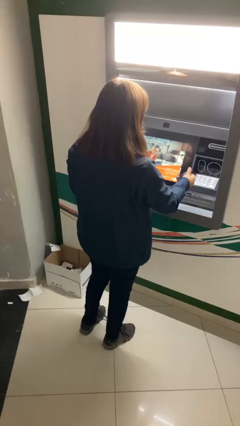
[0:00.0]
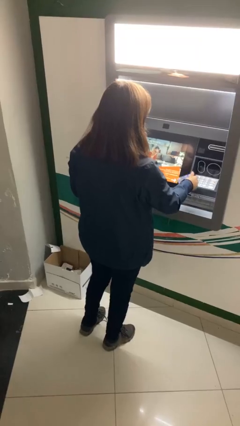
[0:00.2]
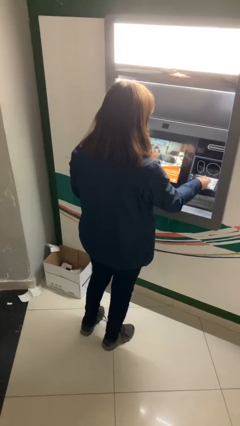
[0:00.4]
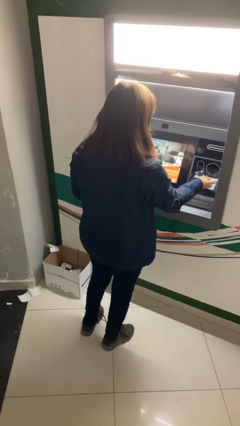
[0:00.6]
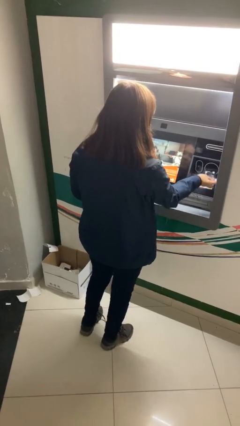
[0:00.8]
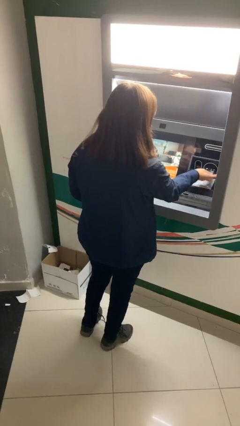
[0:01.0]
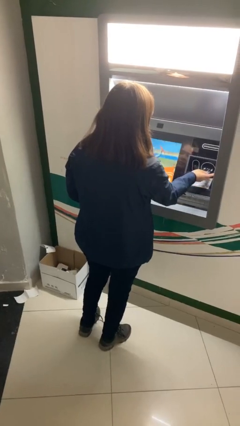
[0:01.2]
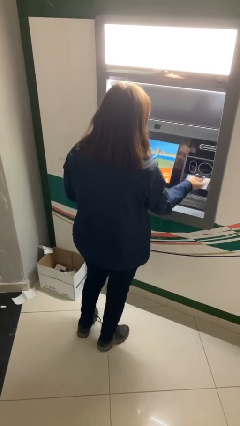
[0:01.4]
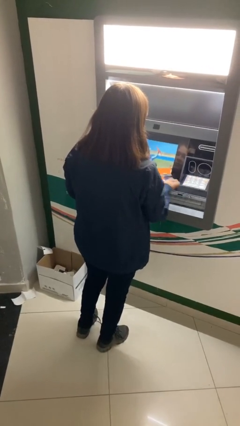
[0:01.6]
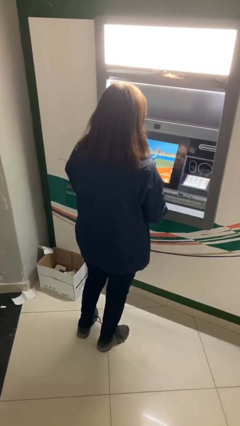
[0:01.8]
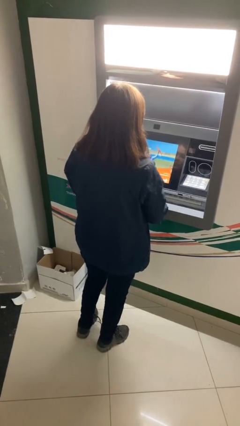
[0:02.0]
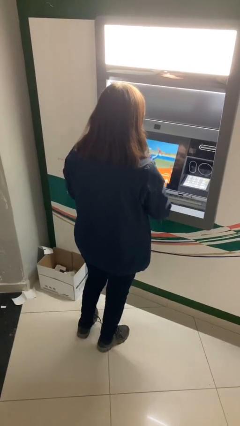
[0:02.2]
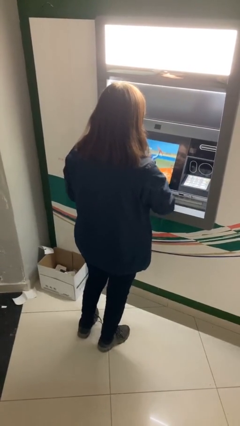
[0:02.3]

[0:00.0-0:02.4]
person purchases from machine

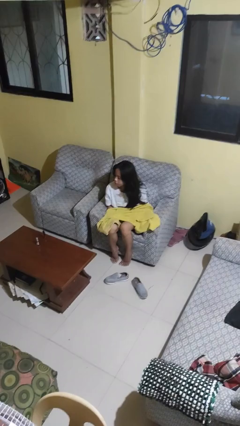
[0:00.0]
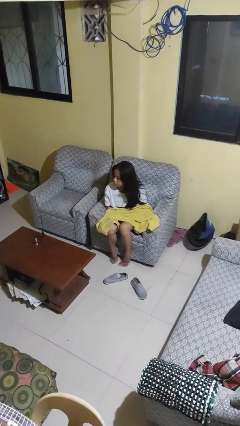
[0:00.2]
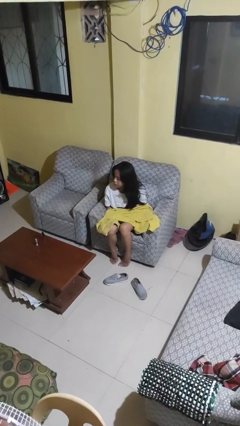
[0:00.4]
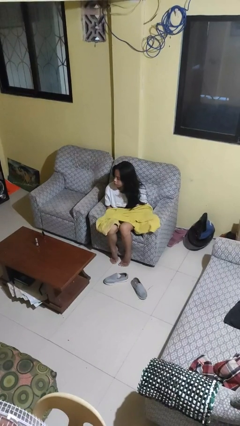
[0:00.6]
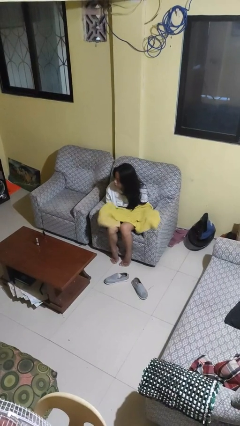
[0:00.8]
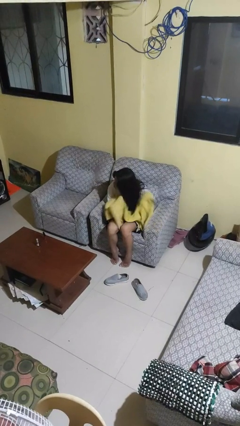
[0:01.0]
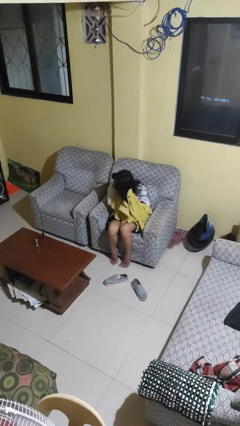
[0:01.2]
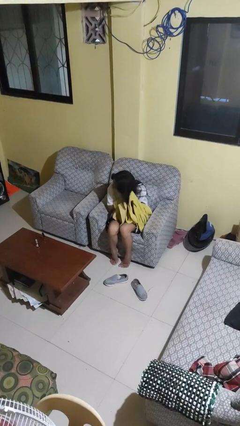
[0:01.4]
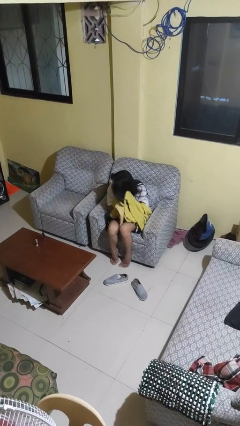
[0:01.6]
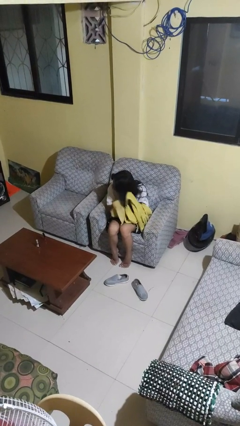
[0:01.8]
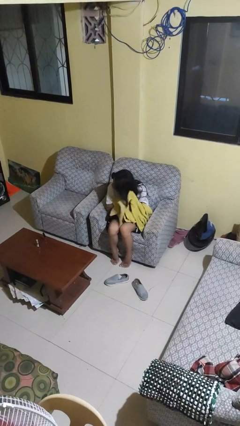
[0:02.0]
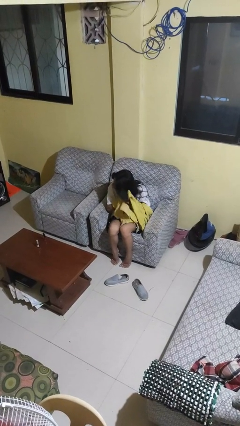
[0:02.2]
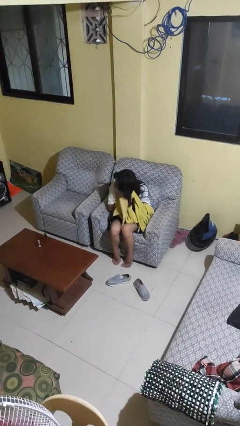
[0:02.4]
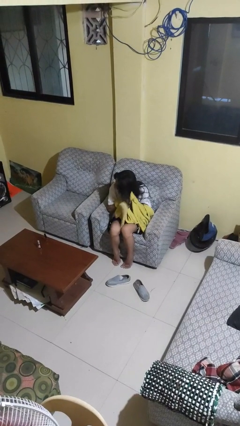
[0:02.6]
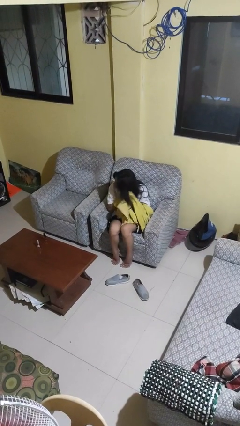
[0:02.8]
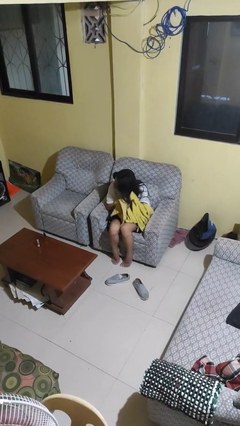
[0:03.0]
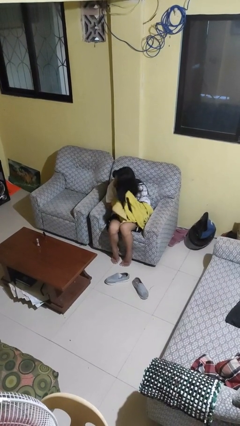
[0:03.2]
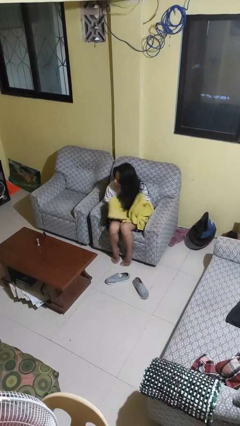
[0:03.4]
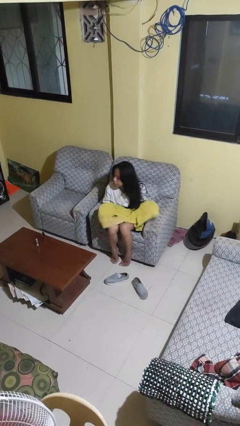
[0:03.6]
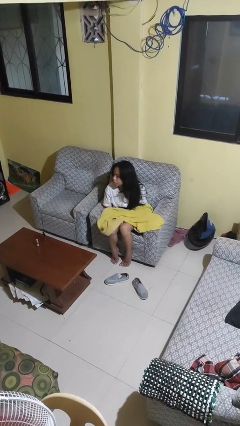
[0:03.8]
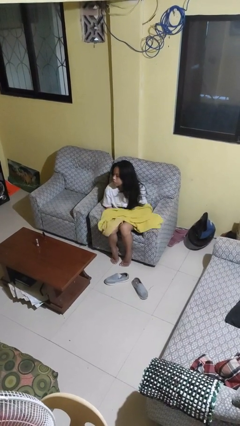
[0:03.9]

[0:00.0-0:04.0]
person dries hair with towel

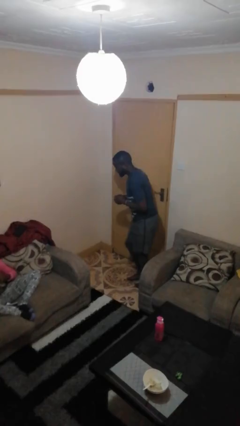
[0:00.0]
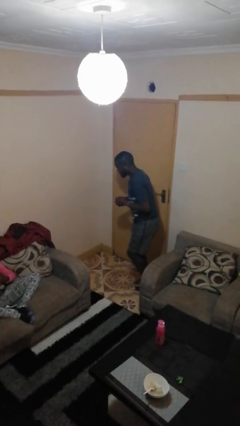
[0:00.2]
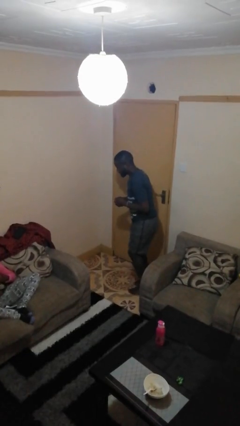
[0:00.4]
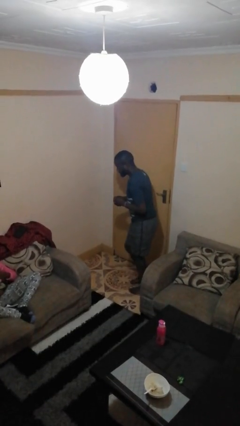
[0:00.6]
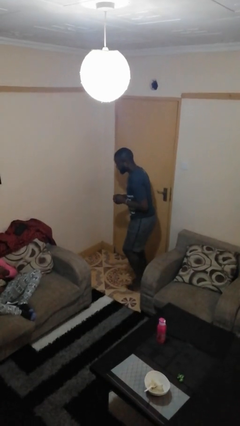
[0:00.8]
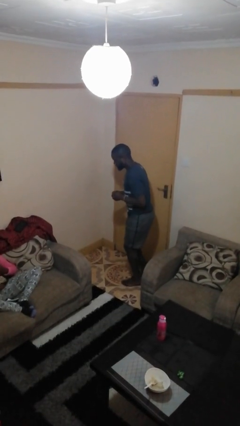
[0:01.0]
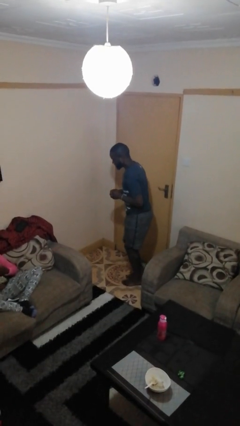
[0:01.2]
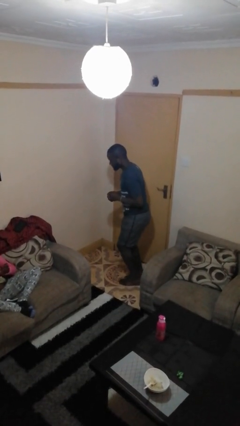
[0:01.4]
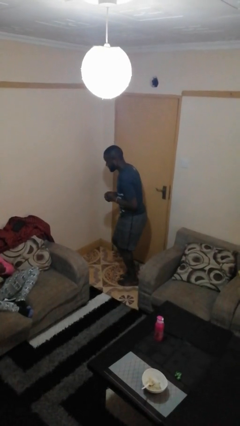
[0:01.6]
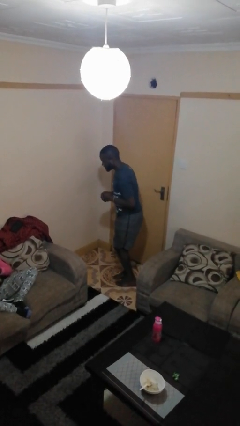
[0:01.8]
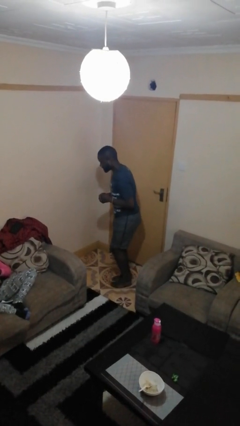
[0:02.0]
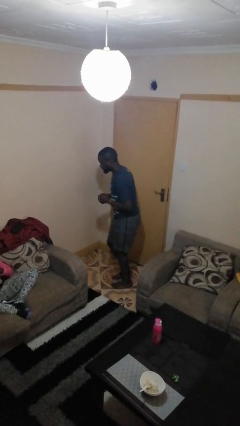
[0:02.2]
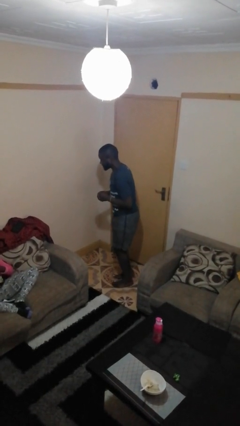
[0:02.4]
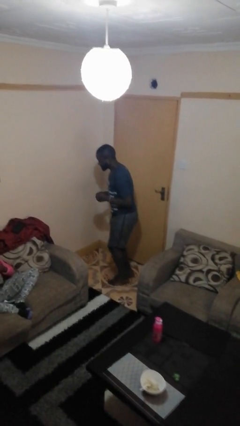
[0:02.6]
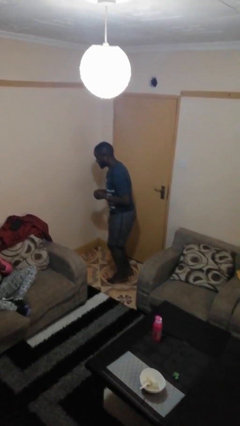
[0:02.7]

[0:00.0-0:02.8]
person walks tiptoe

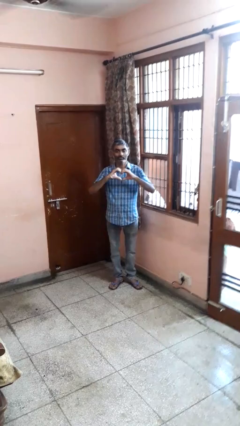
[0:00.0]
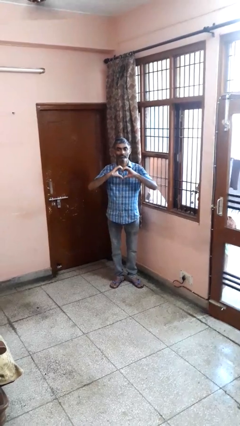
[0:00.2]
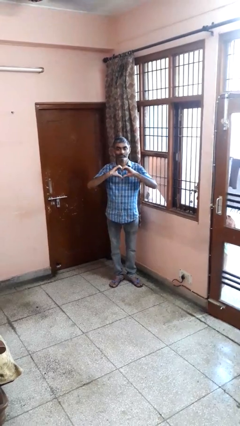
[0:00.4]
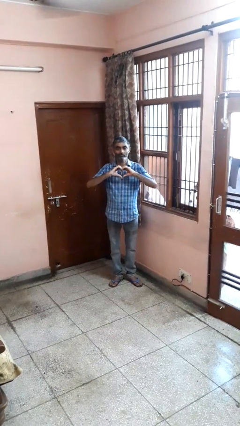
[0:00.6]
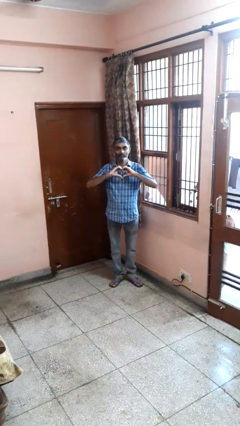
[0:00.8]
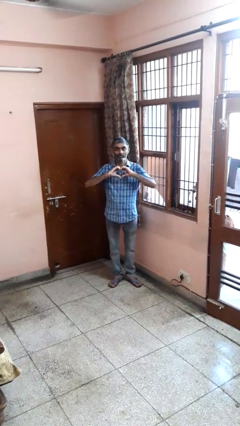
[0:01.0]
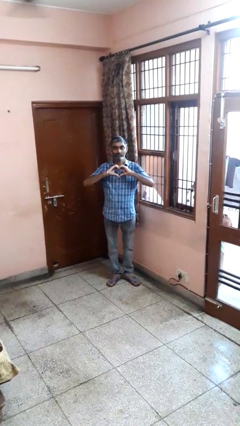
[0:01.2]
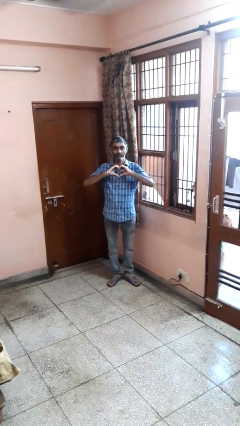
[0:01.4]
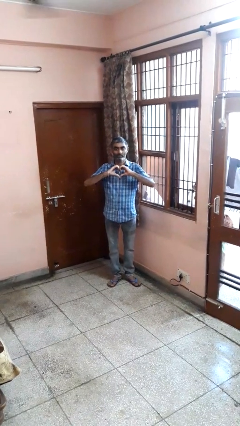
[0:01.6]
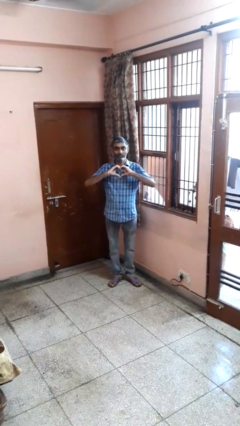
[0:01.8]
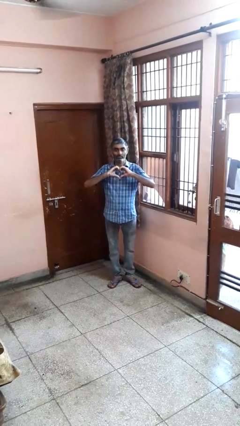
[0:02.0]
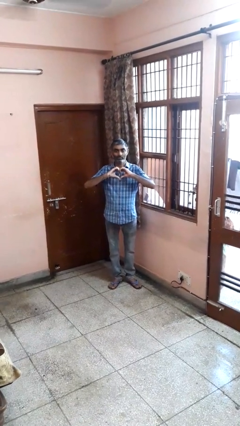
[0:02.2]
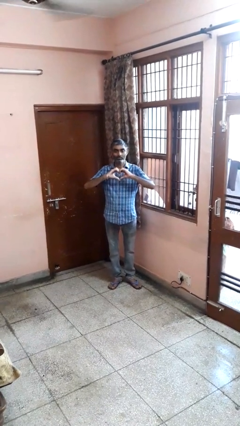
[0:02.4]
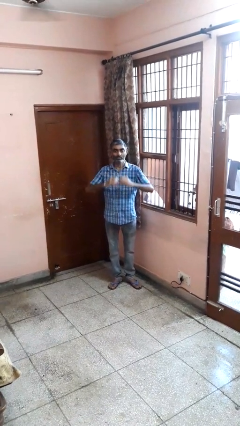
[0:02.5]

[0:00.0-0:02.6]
person gestures heart

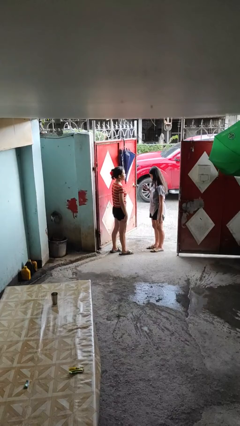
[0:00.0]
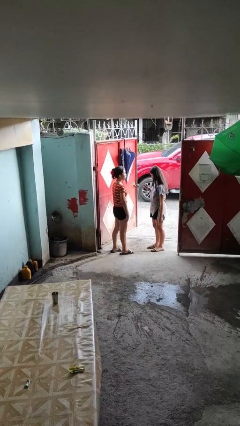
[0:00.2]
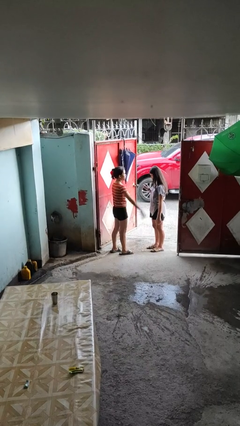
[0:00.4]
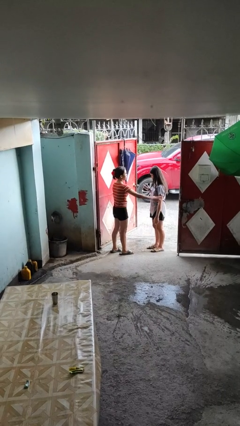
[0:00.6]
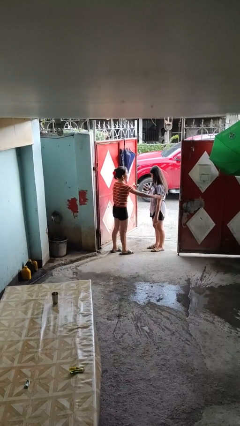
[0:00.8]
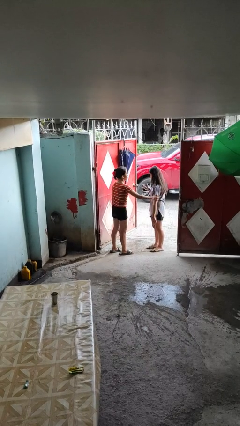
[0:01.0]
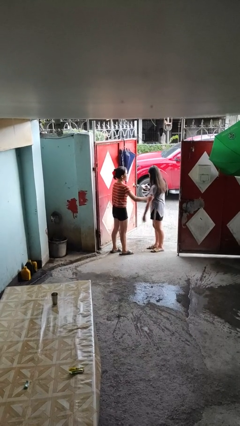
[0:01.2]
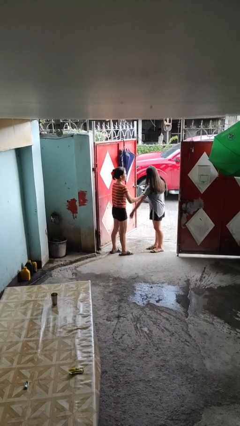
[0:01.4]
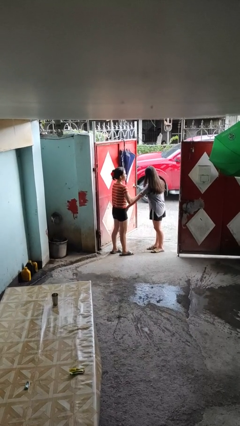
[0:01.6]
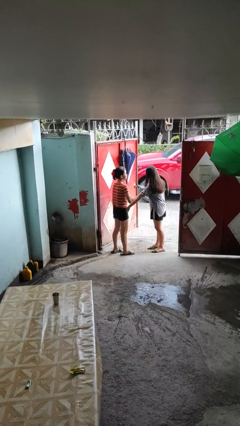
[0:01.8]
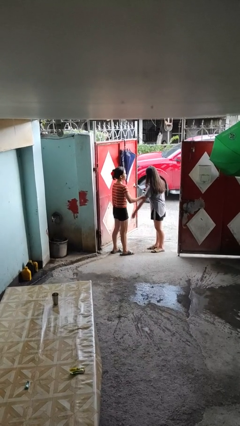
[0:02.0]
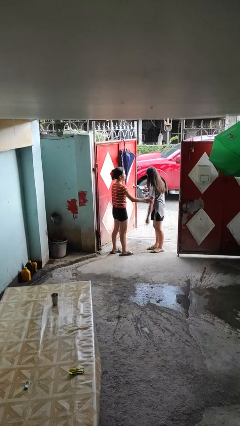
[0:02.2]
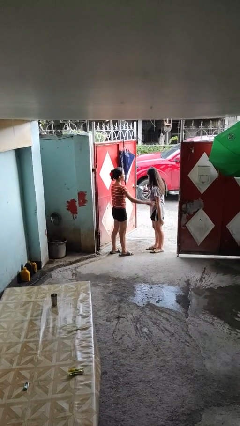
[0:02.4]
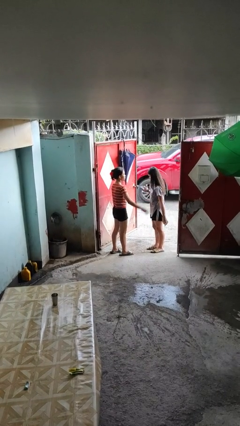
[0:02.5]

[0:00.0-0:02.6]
person grabs person by bicep

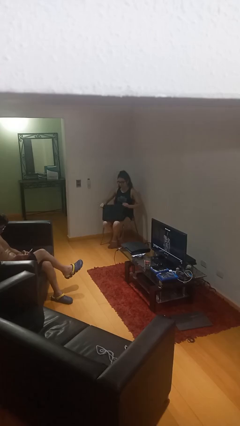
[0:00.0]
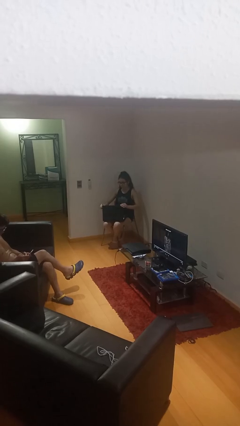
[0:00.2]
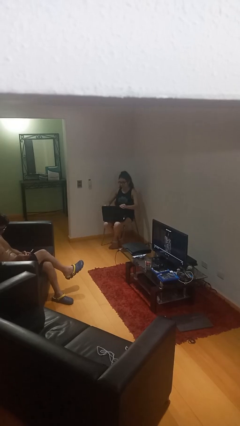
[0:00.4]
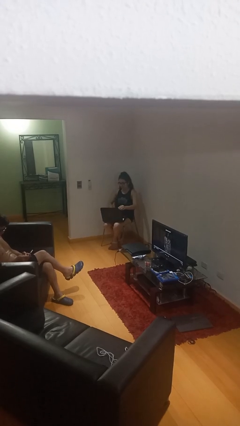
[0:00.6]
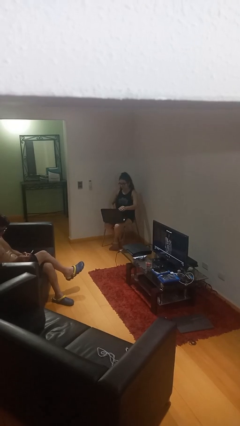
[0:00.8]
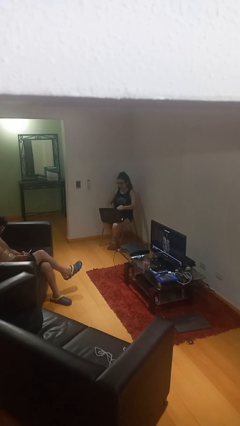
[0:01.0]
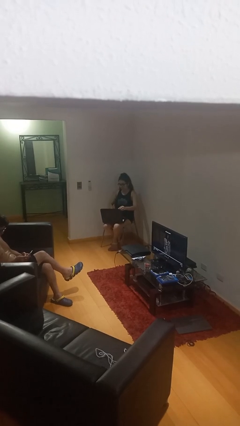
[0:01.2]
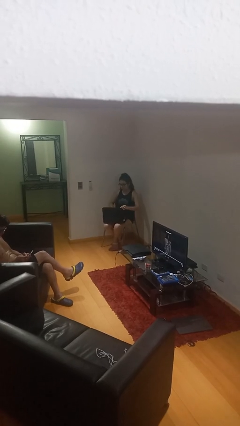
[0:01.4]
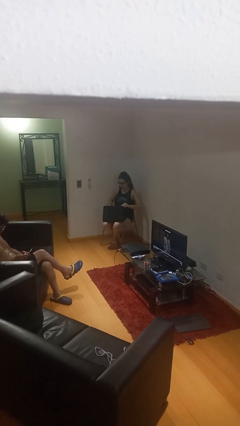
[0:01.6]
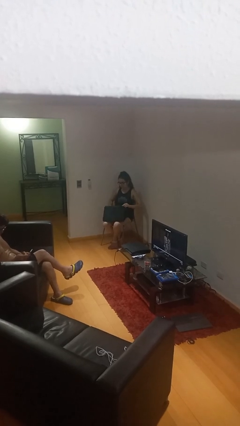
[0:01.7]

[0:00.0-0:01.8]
person interacts with laptop

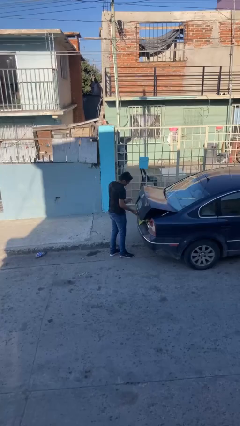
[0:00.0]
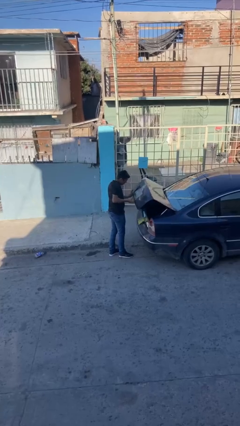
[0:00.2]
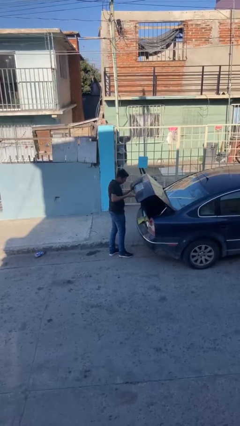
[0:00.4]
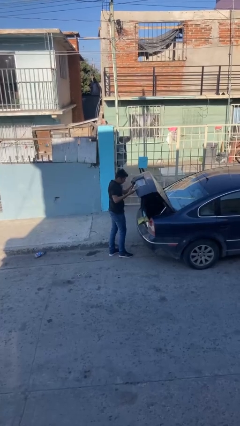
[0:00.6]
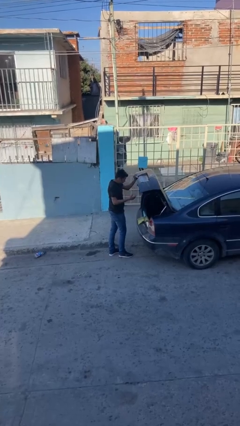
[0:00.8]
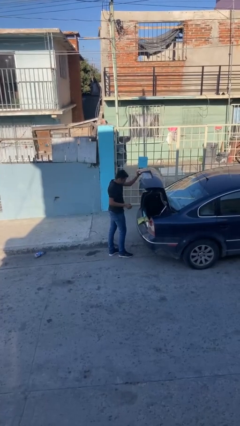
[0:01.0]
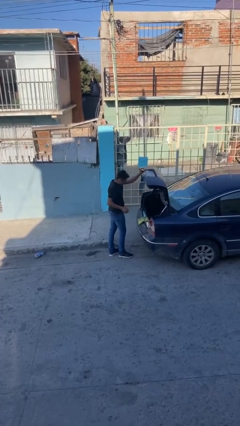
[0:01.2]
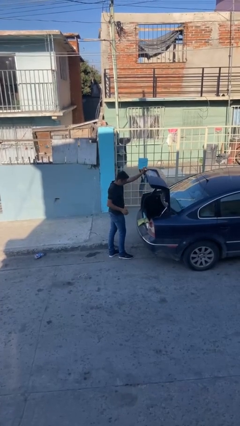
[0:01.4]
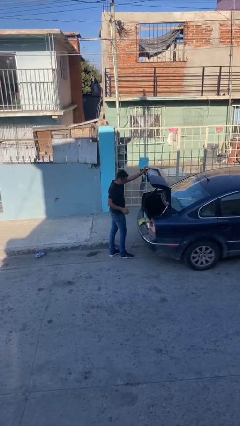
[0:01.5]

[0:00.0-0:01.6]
person opens car trunk
